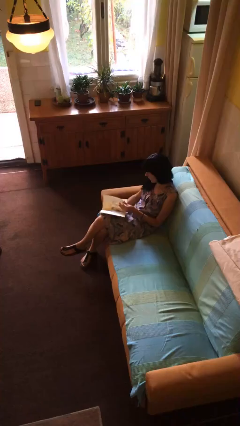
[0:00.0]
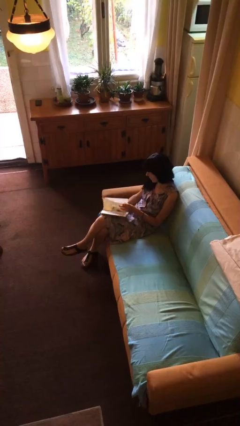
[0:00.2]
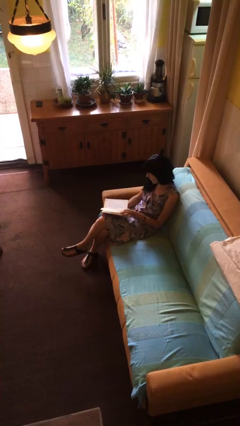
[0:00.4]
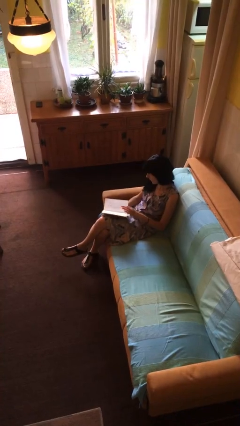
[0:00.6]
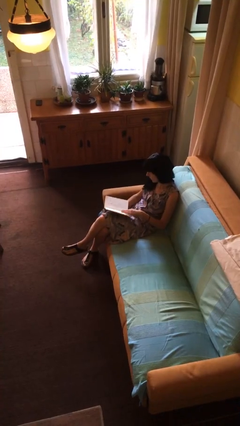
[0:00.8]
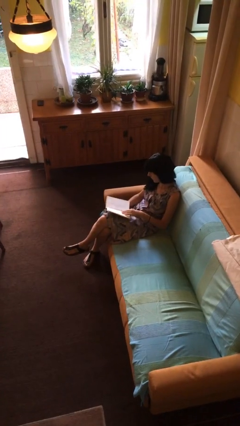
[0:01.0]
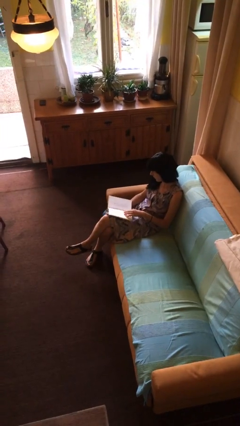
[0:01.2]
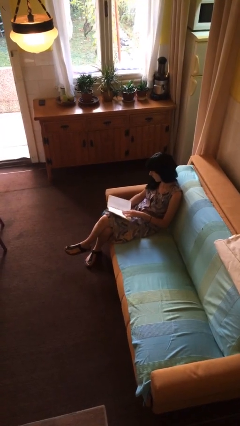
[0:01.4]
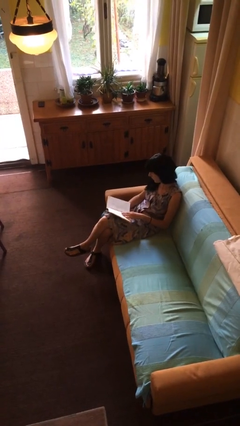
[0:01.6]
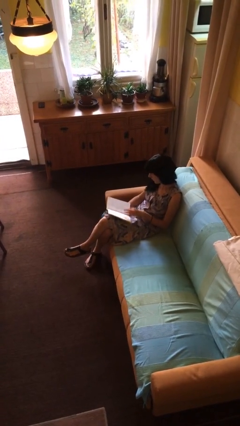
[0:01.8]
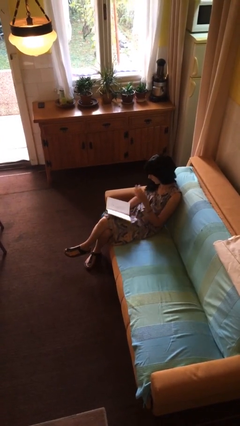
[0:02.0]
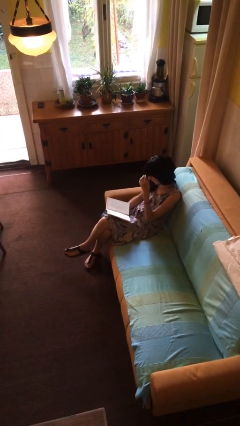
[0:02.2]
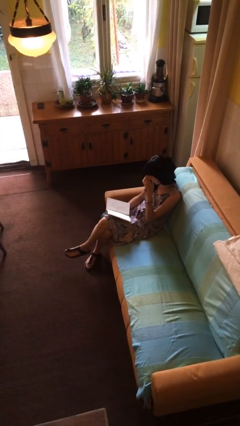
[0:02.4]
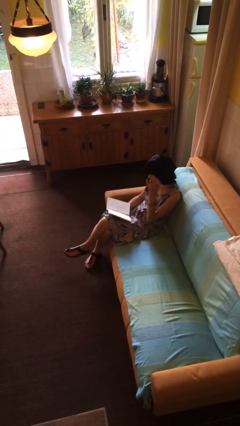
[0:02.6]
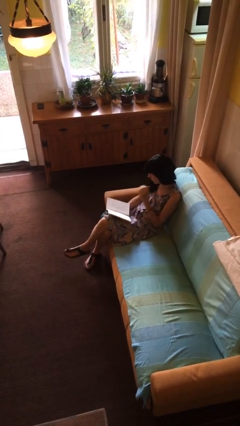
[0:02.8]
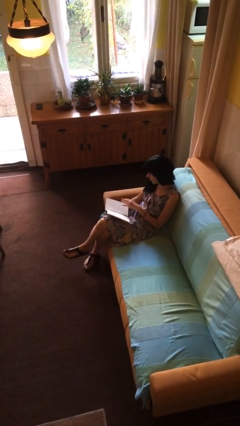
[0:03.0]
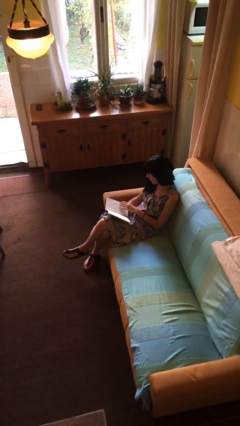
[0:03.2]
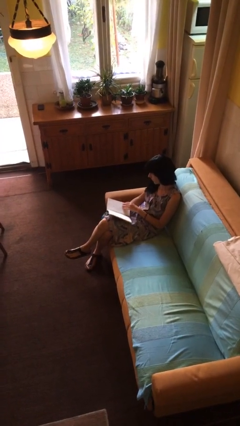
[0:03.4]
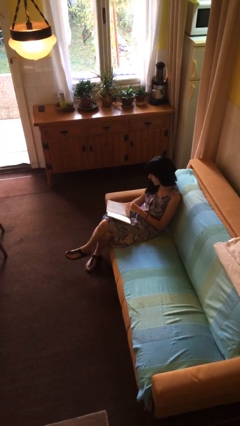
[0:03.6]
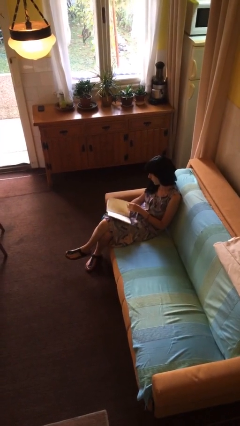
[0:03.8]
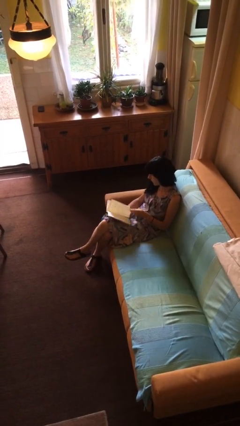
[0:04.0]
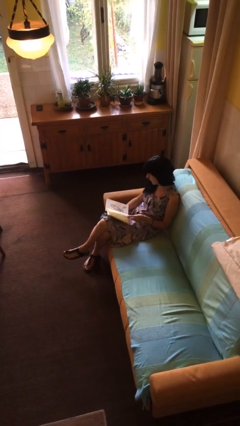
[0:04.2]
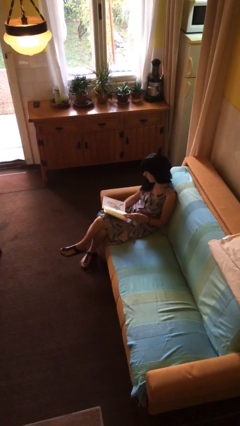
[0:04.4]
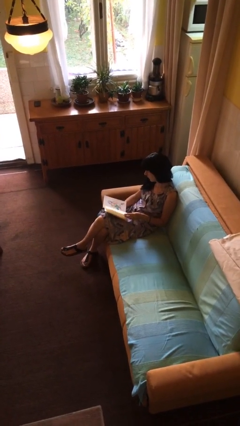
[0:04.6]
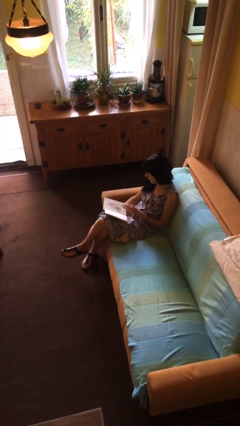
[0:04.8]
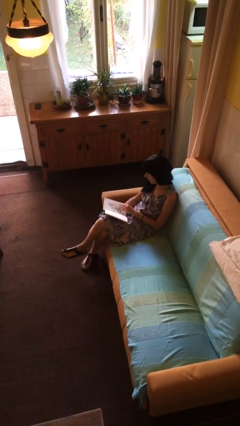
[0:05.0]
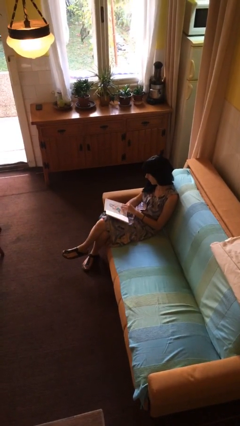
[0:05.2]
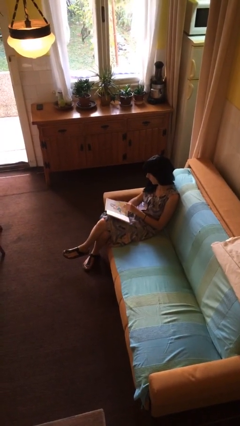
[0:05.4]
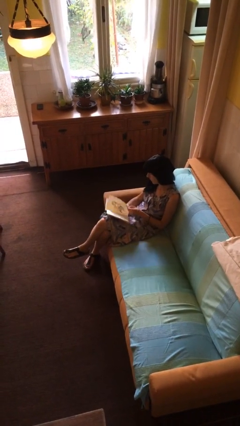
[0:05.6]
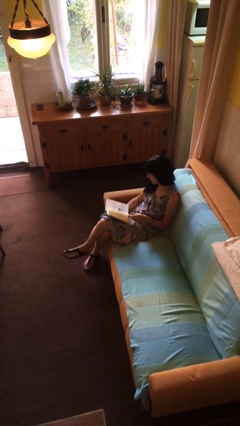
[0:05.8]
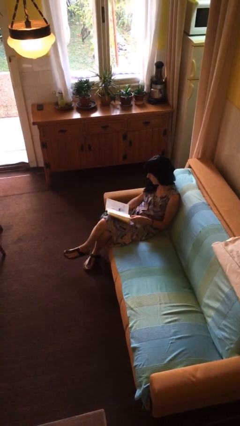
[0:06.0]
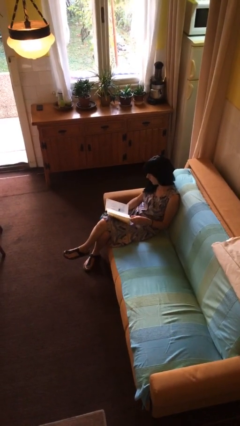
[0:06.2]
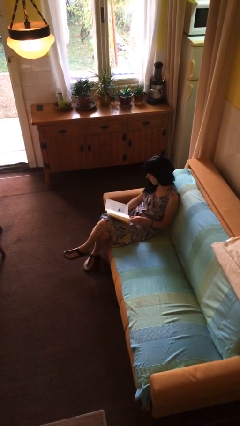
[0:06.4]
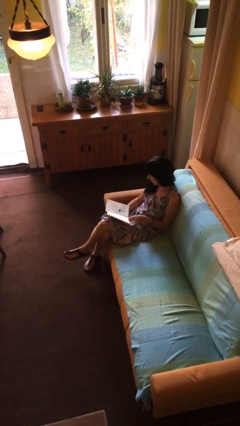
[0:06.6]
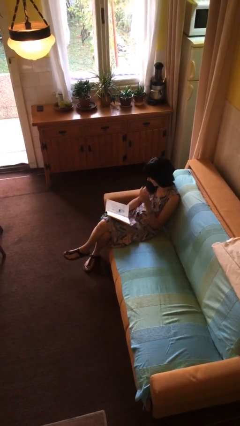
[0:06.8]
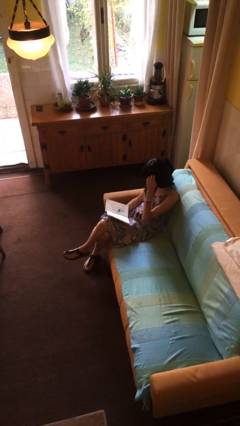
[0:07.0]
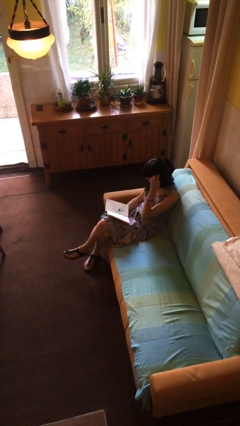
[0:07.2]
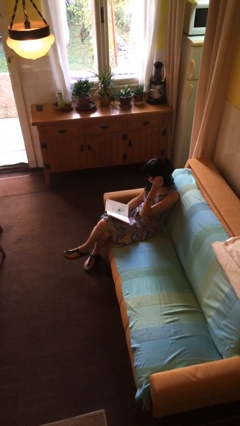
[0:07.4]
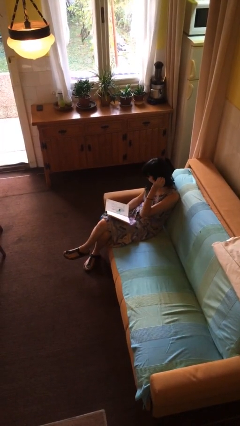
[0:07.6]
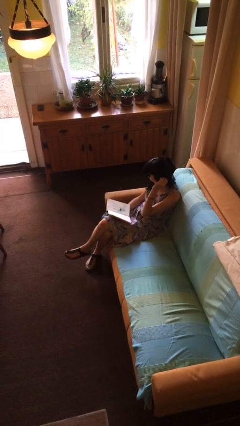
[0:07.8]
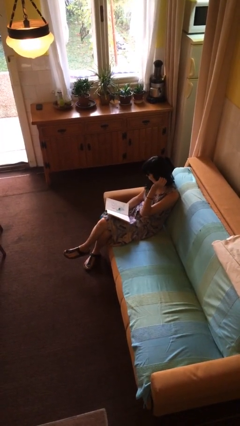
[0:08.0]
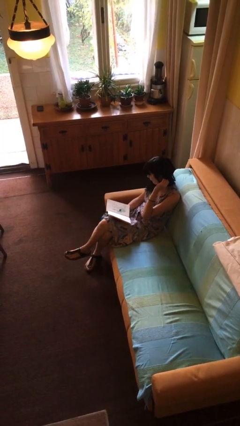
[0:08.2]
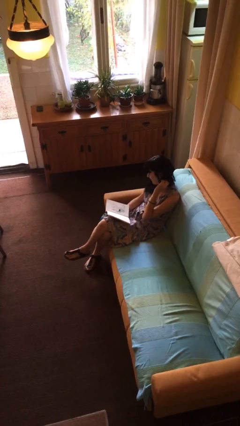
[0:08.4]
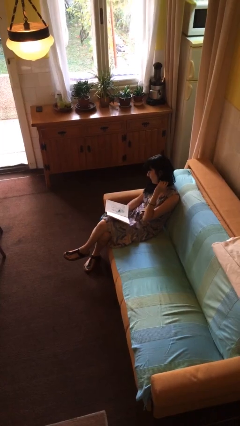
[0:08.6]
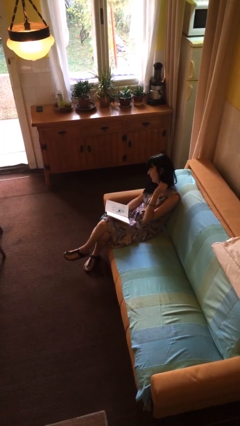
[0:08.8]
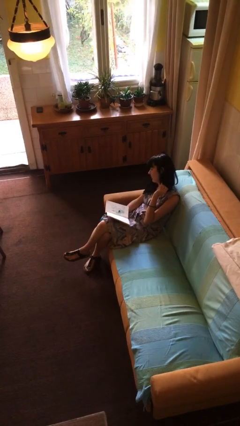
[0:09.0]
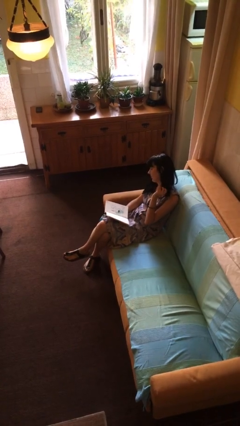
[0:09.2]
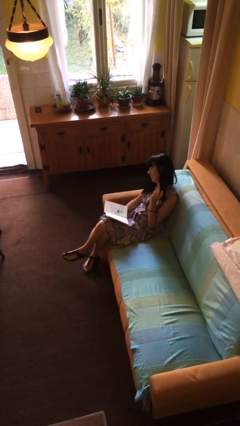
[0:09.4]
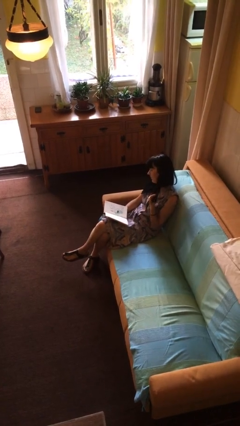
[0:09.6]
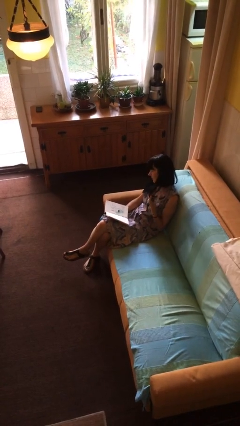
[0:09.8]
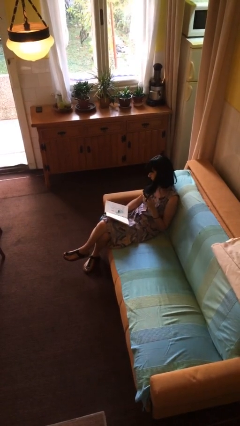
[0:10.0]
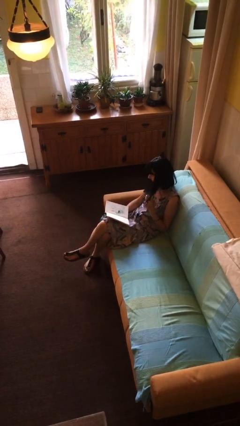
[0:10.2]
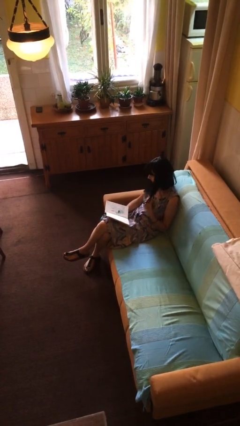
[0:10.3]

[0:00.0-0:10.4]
person reads document

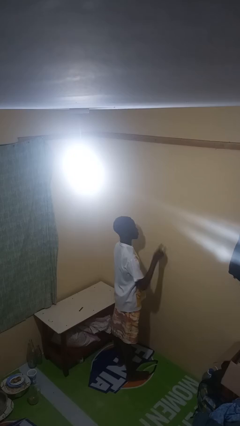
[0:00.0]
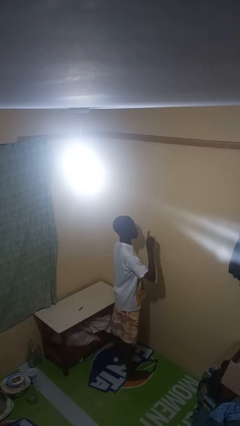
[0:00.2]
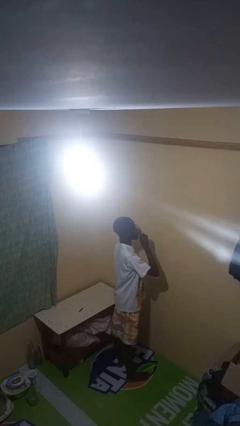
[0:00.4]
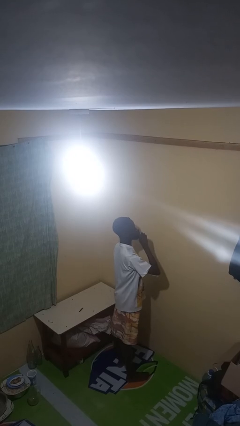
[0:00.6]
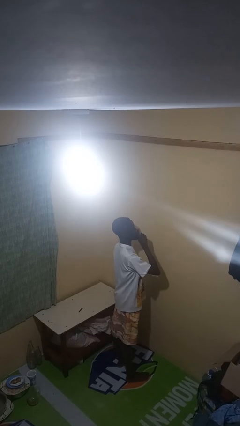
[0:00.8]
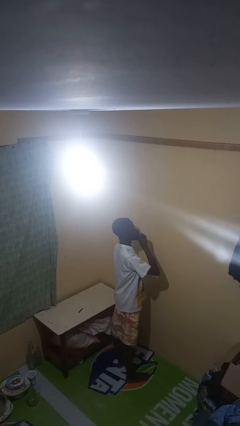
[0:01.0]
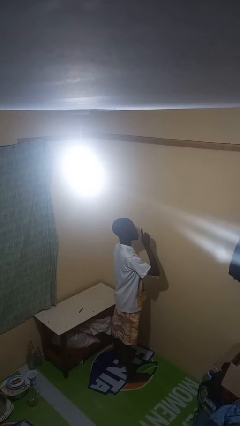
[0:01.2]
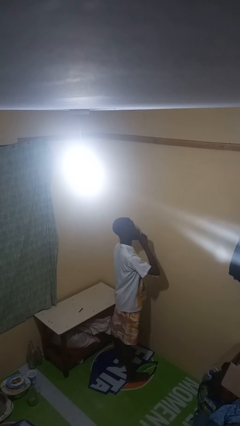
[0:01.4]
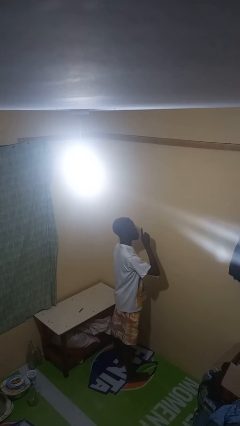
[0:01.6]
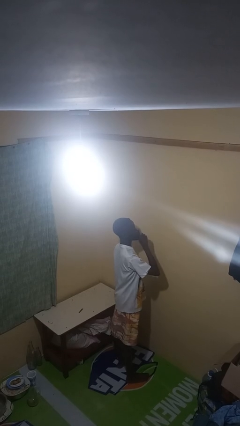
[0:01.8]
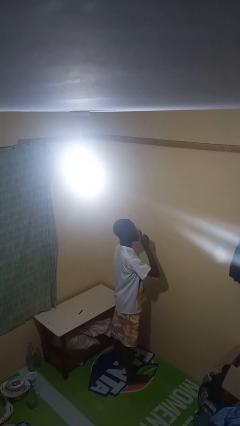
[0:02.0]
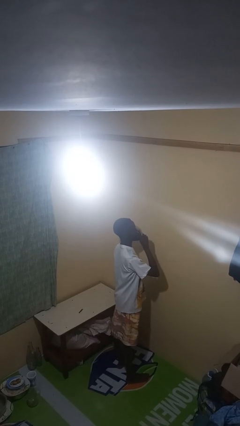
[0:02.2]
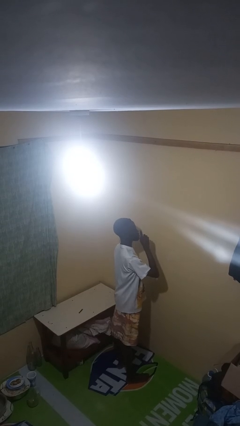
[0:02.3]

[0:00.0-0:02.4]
person gestures be quiet

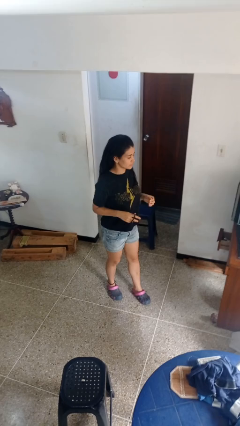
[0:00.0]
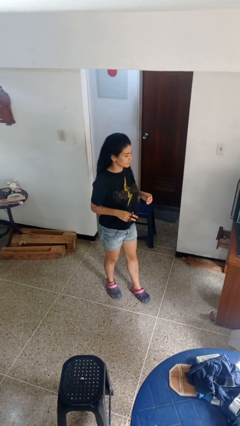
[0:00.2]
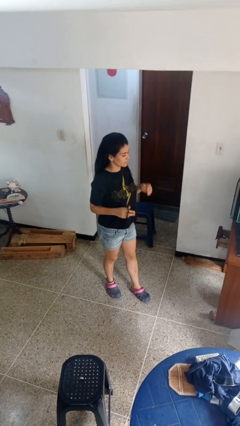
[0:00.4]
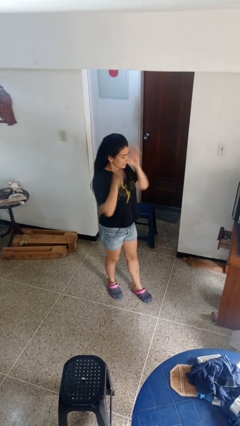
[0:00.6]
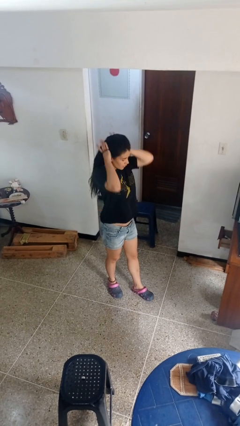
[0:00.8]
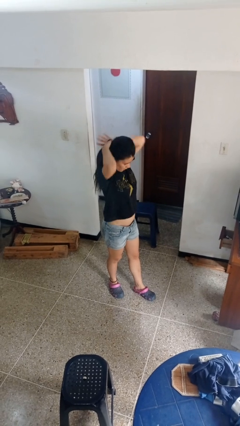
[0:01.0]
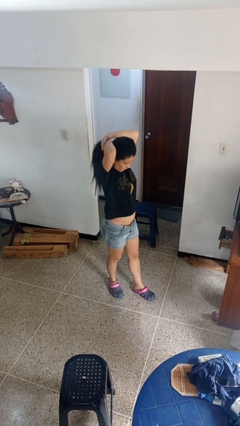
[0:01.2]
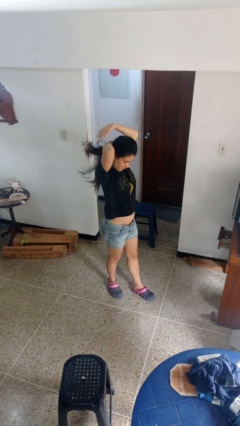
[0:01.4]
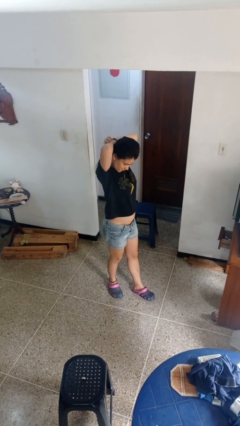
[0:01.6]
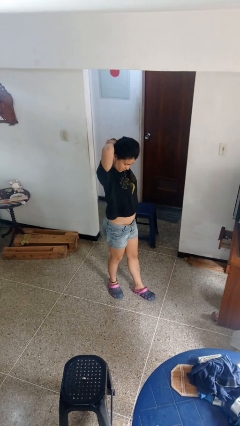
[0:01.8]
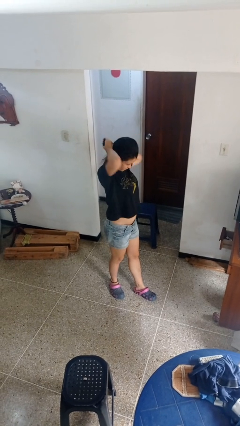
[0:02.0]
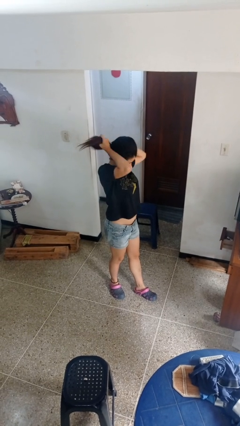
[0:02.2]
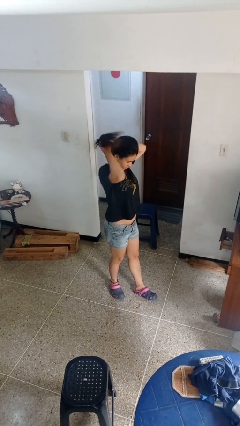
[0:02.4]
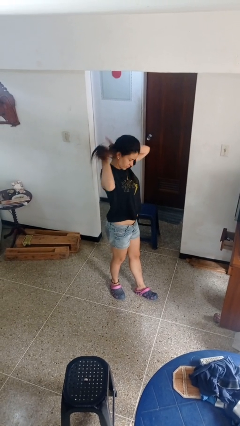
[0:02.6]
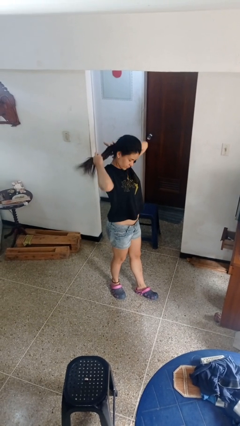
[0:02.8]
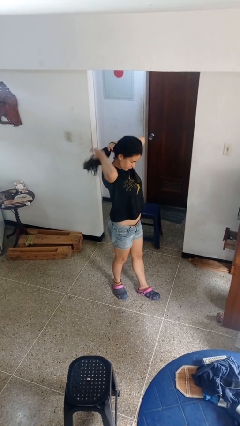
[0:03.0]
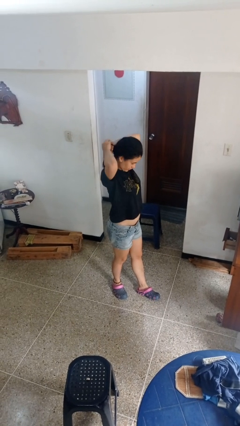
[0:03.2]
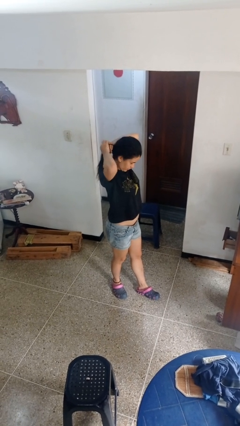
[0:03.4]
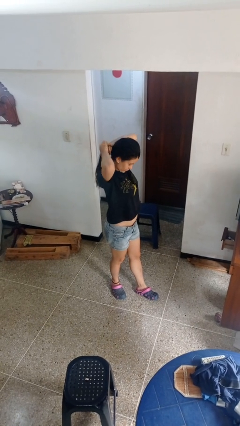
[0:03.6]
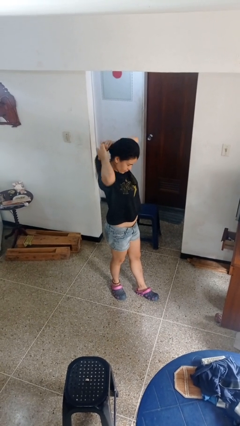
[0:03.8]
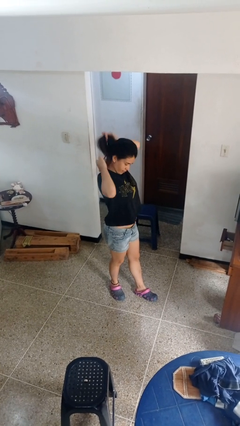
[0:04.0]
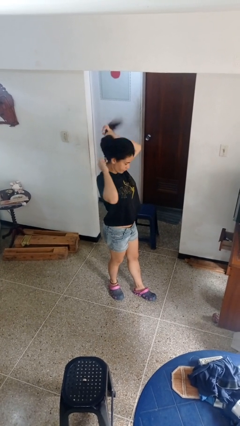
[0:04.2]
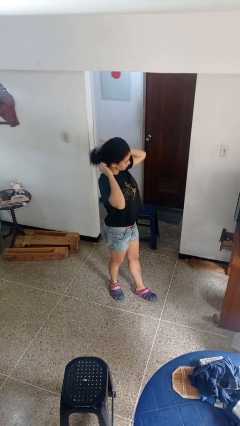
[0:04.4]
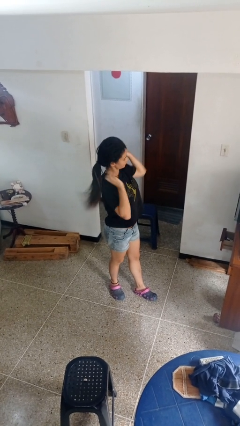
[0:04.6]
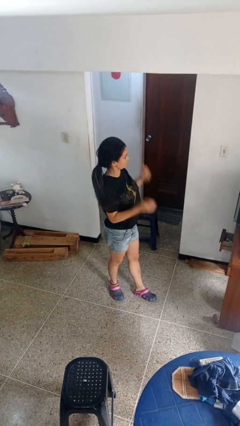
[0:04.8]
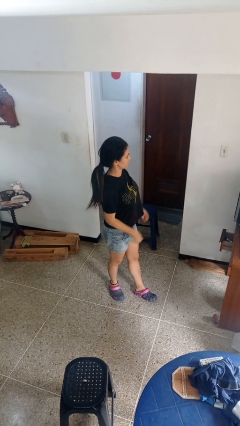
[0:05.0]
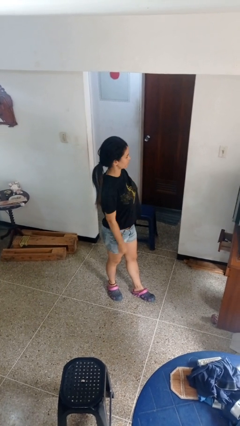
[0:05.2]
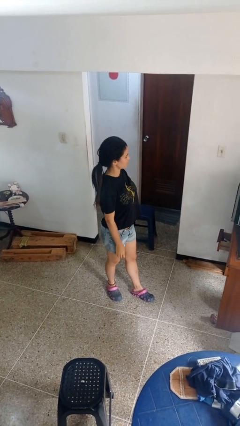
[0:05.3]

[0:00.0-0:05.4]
person puts hair in ponytail
